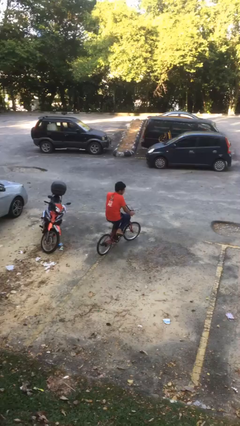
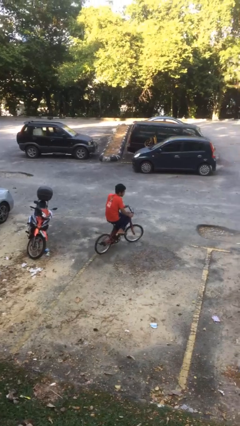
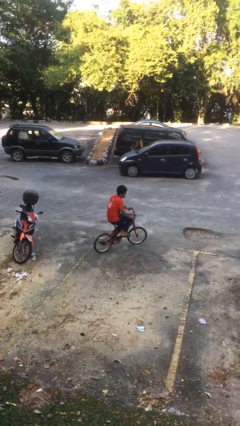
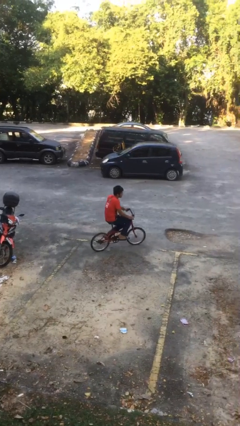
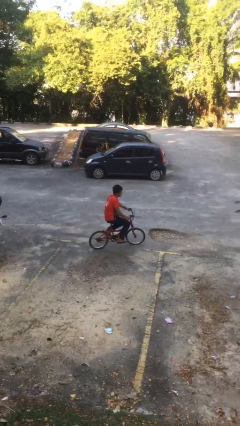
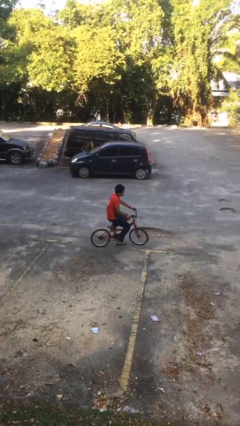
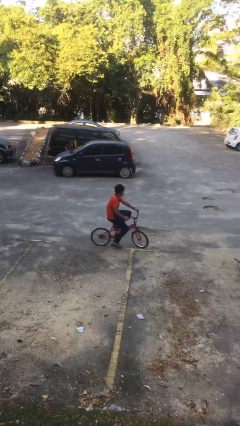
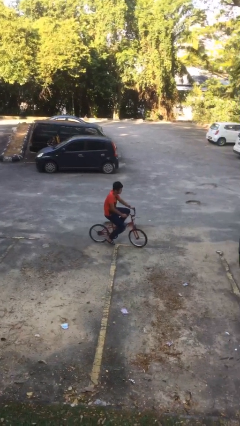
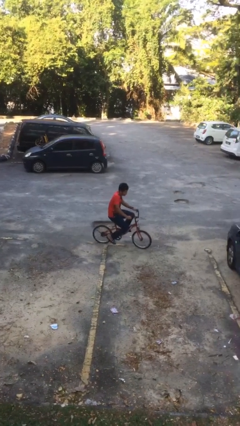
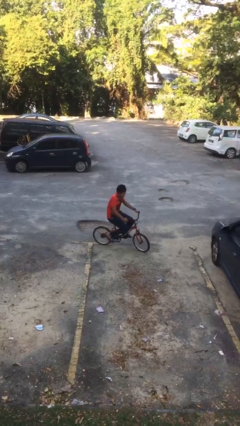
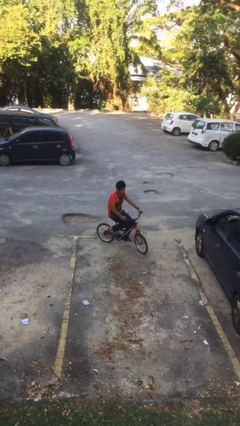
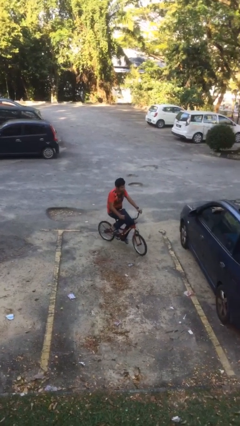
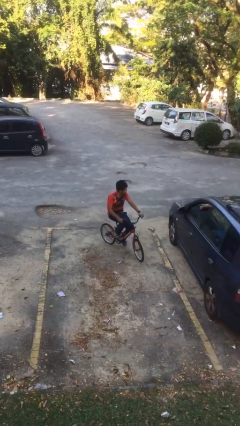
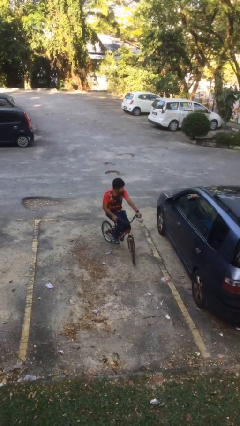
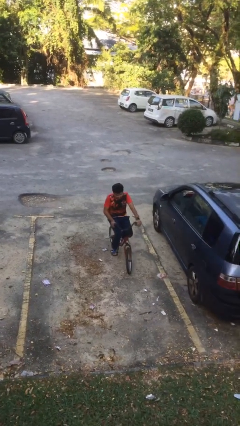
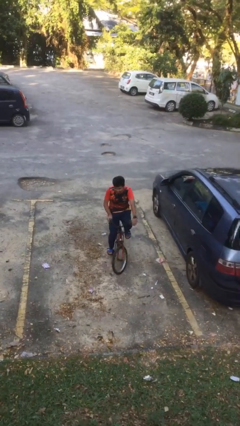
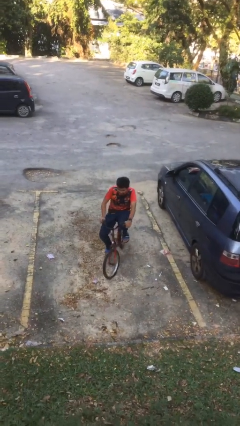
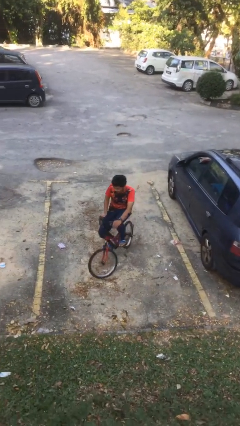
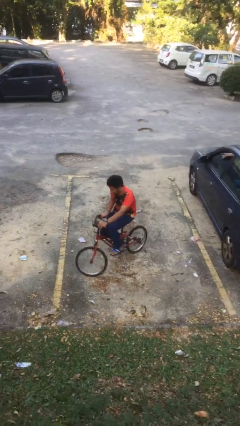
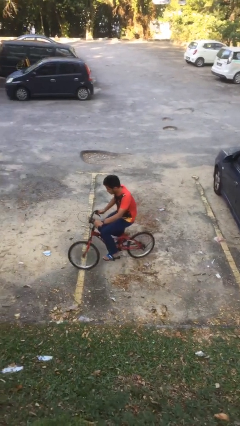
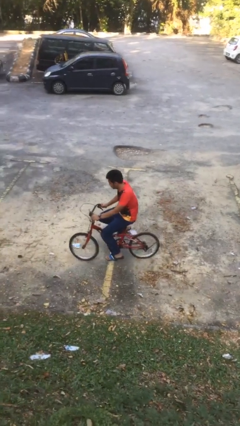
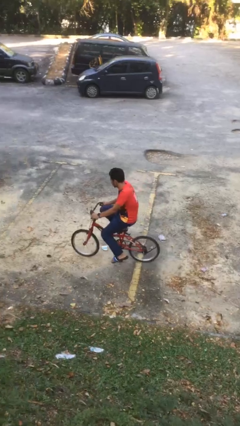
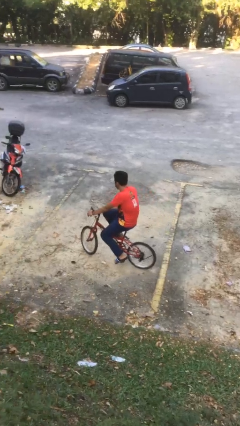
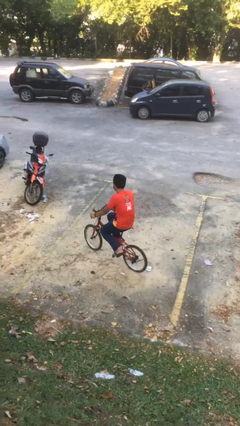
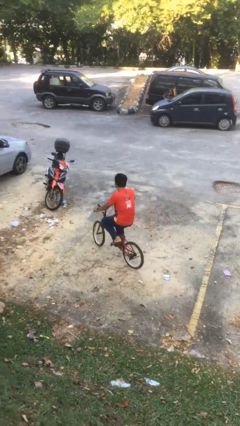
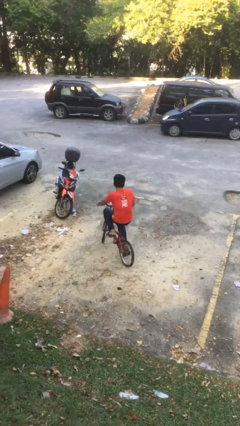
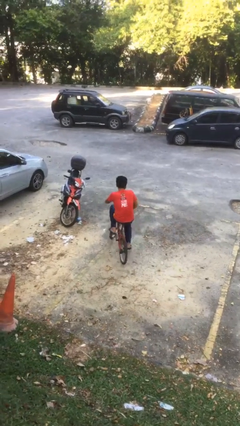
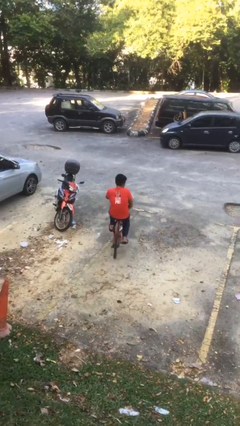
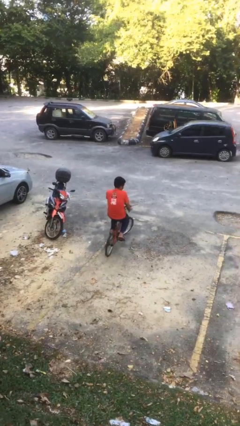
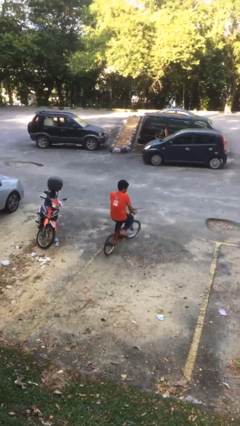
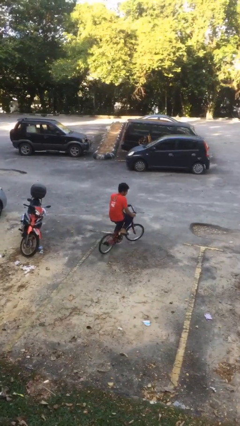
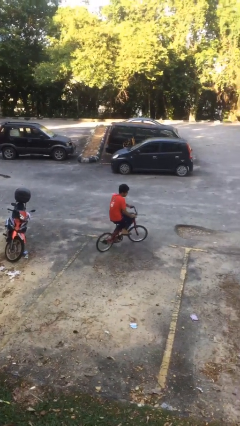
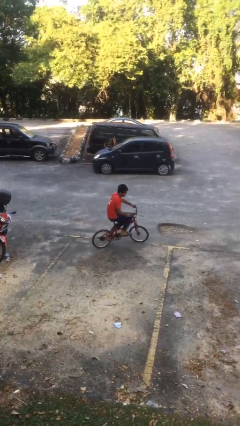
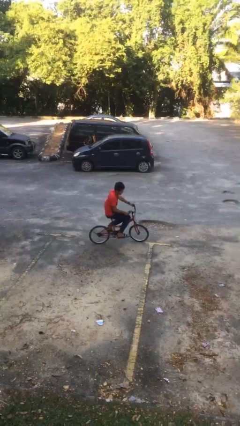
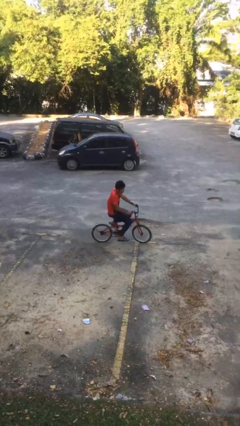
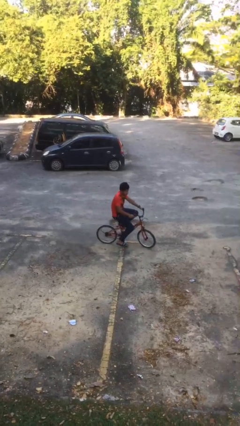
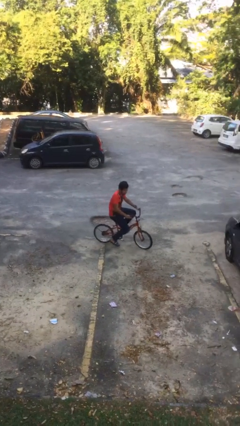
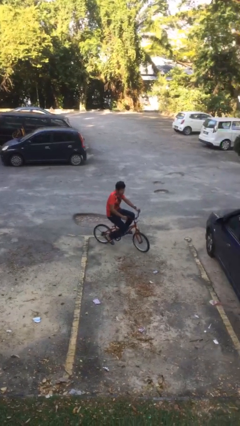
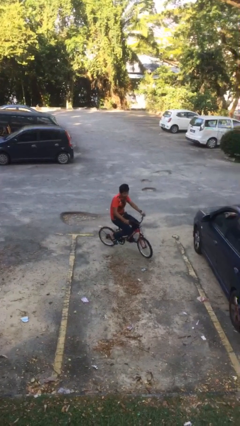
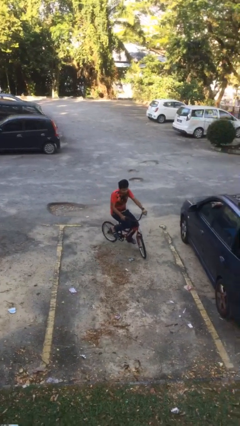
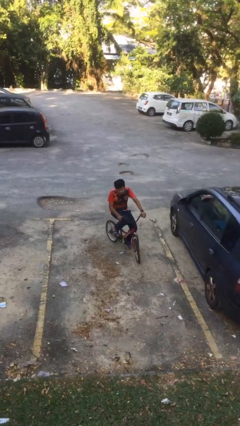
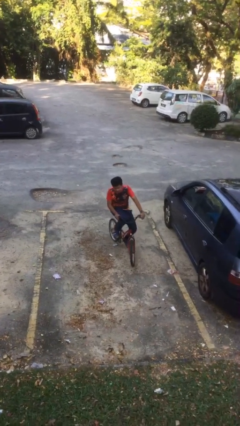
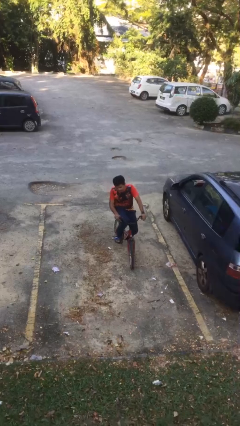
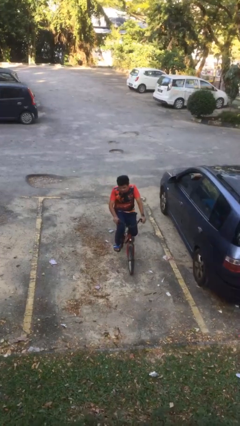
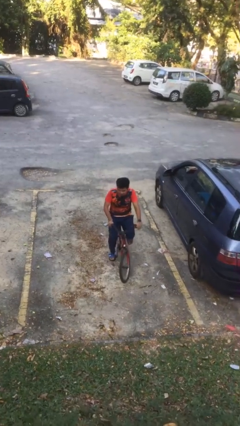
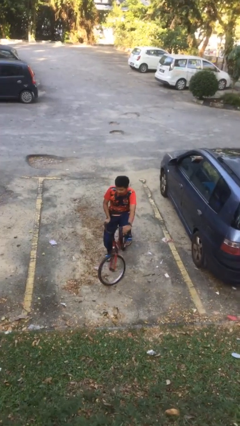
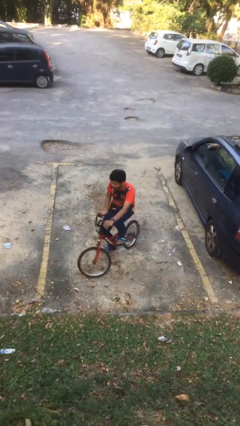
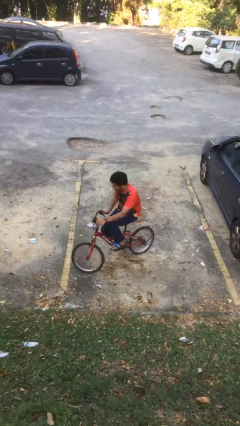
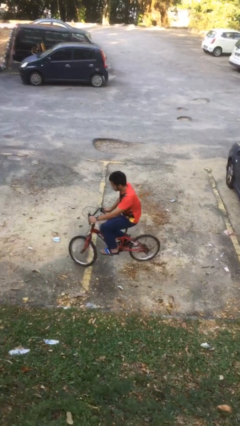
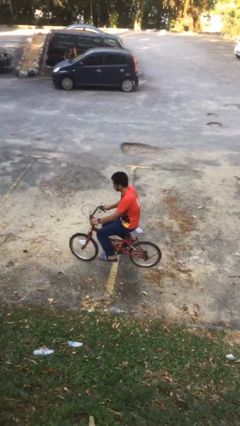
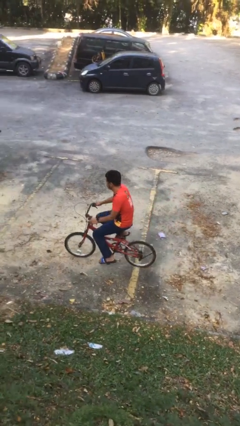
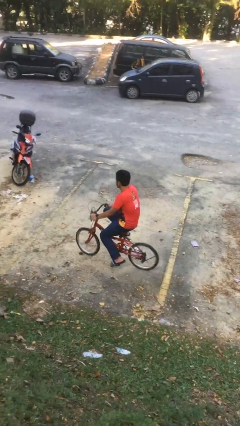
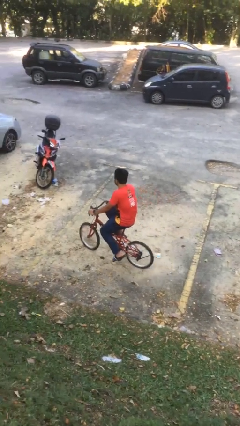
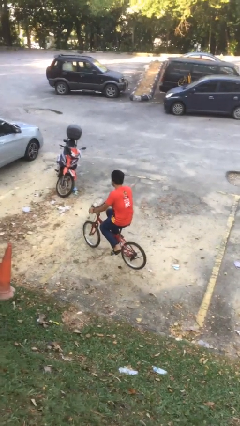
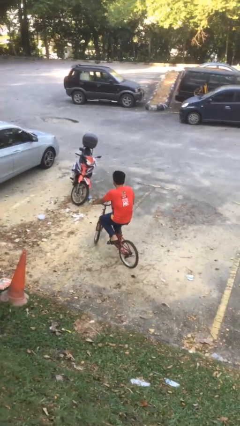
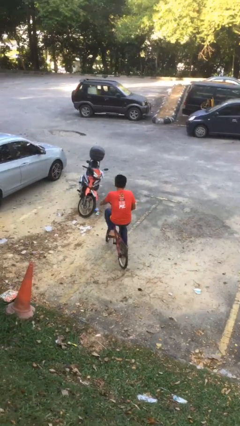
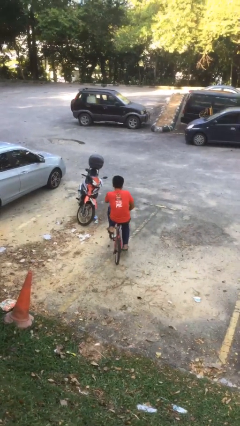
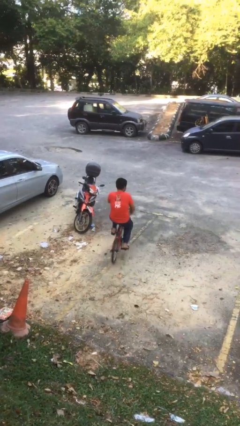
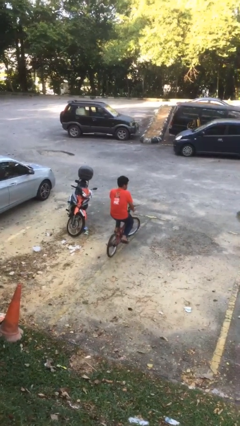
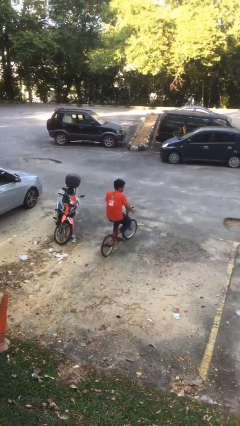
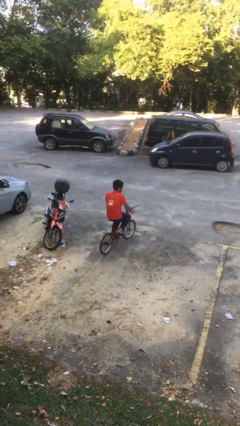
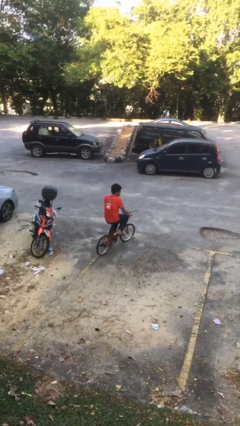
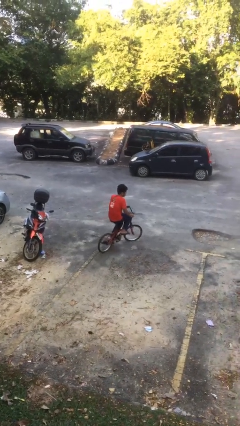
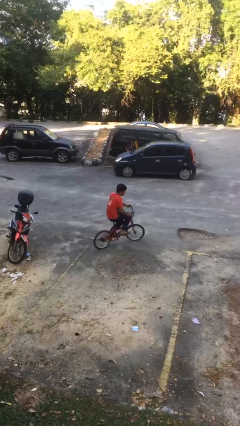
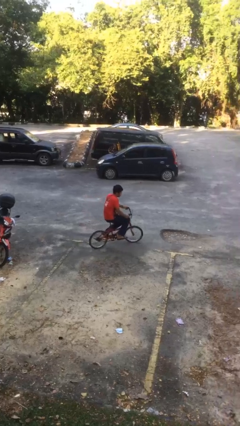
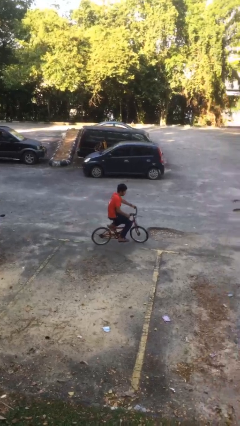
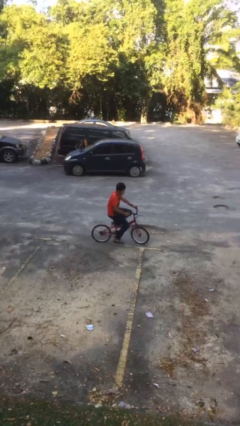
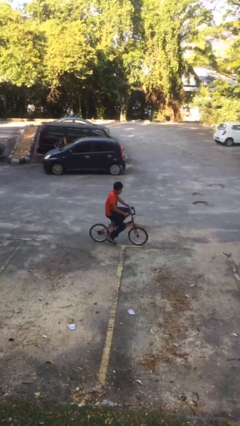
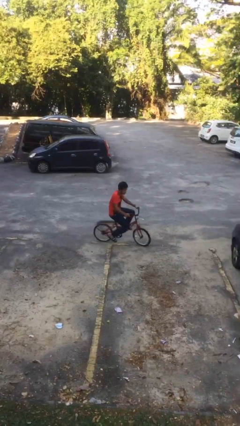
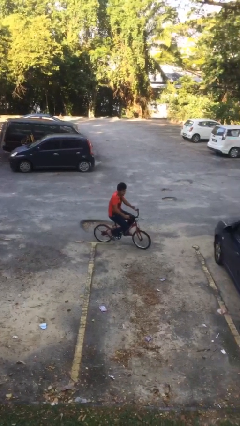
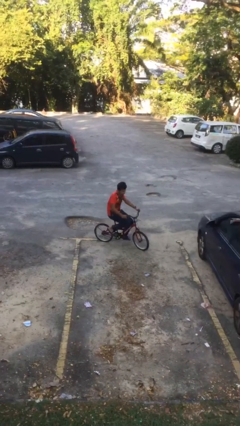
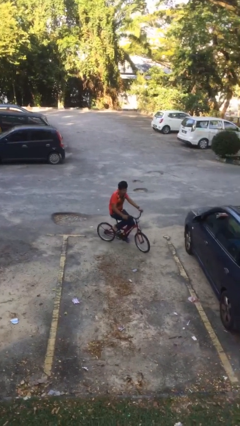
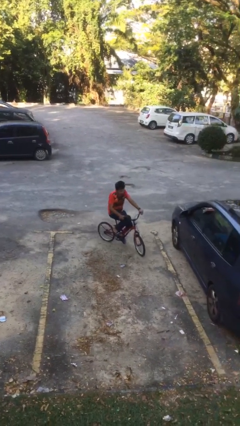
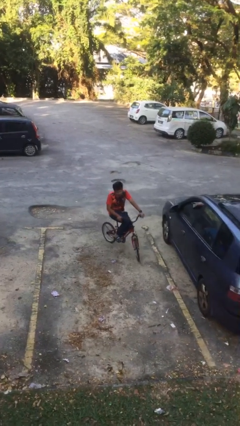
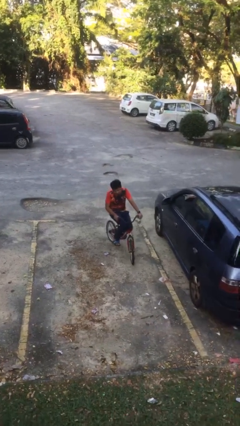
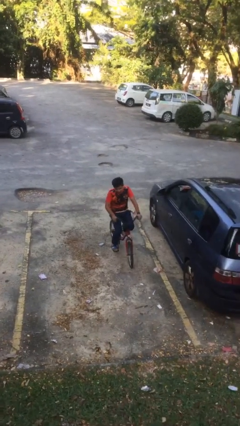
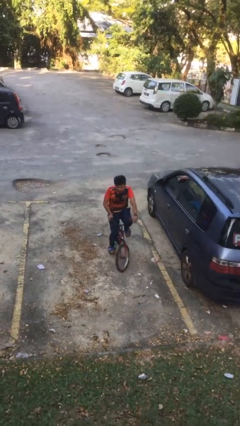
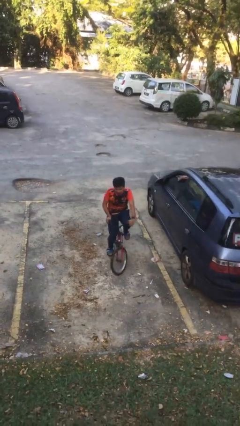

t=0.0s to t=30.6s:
person rides bicycle

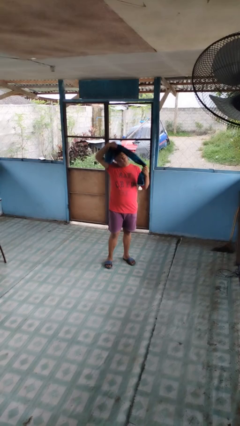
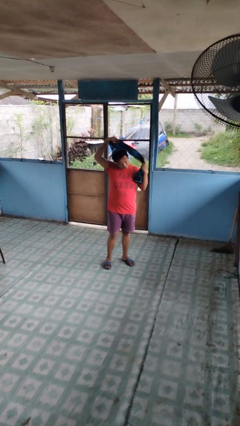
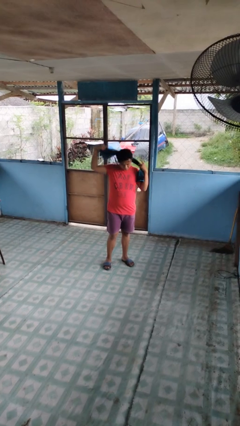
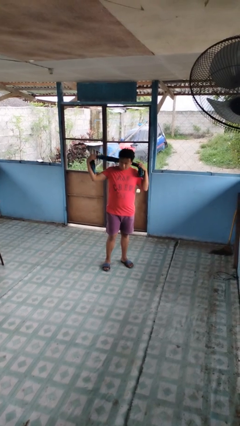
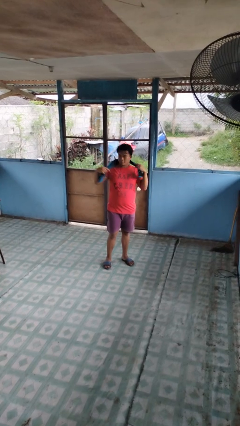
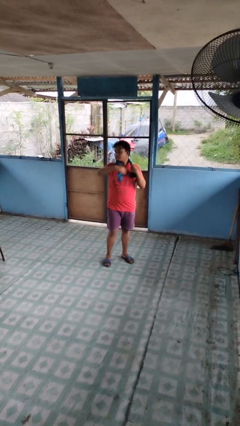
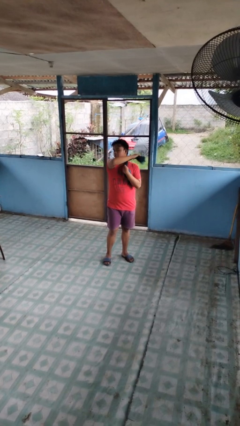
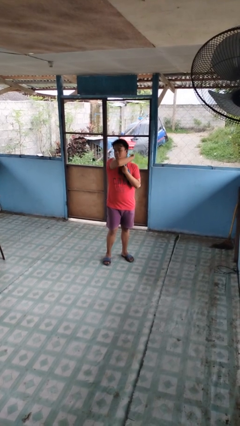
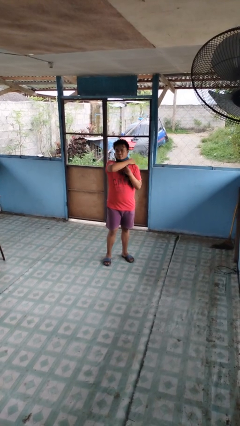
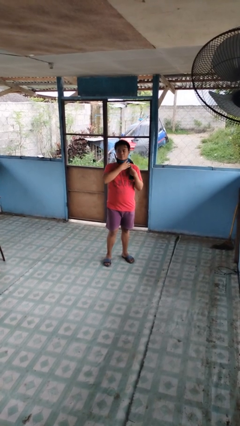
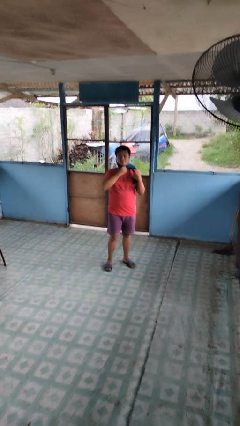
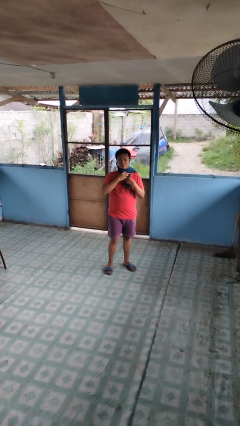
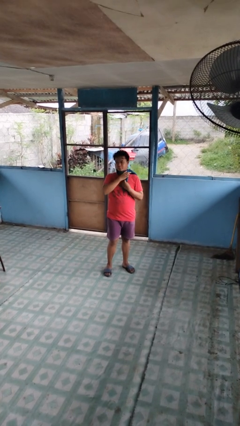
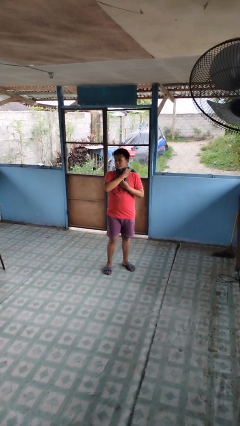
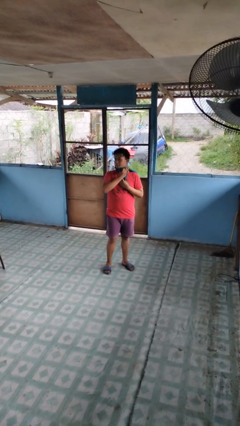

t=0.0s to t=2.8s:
person puts on scarf
